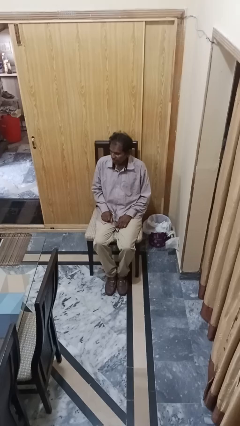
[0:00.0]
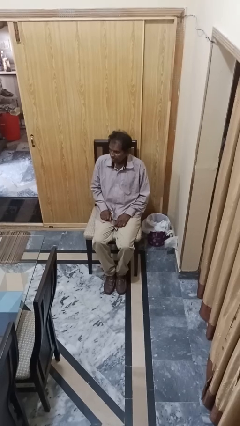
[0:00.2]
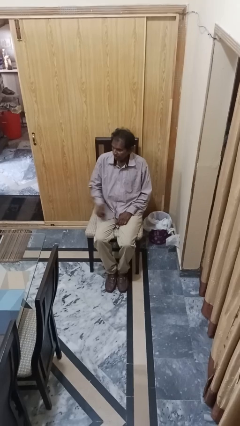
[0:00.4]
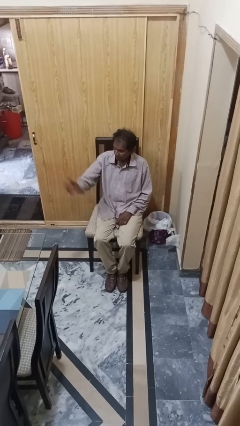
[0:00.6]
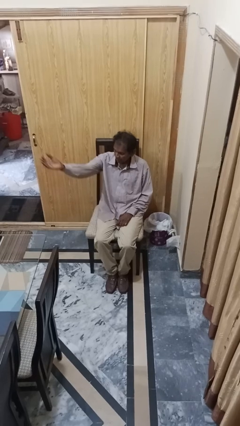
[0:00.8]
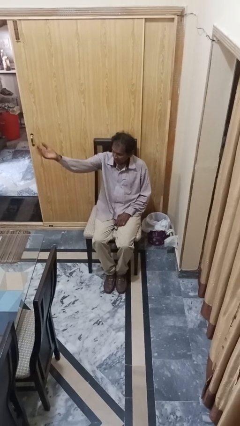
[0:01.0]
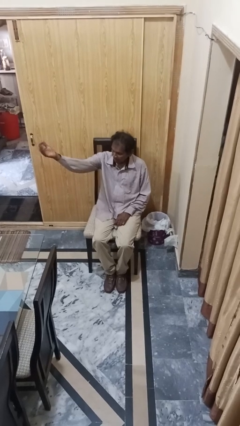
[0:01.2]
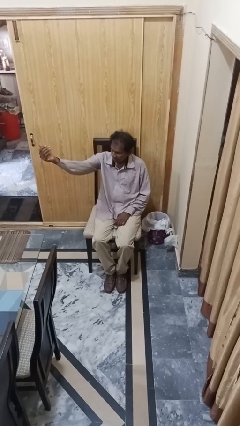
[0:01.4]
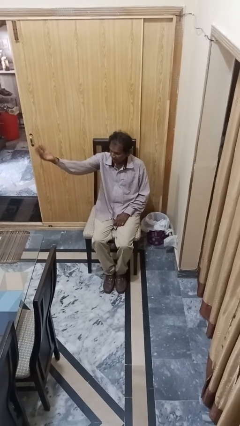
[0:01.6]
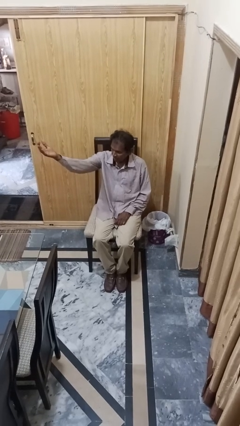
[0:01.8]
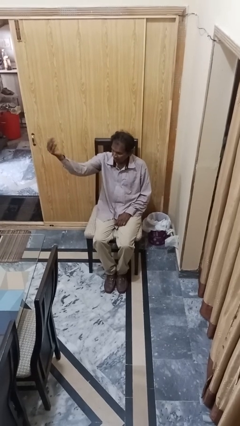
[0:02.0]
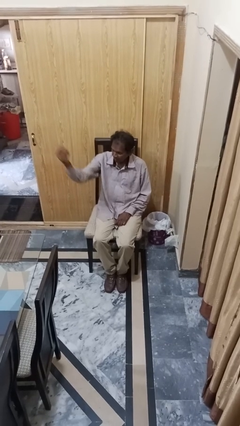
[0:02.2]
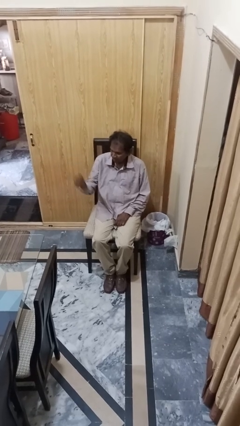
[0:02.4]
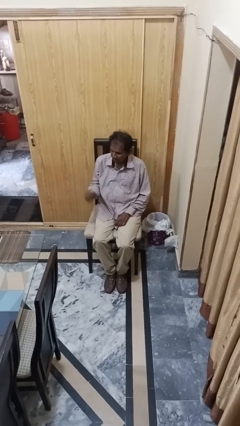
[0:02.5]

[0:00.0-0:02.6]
person gestures come here

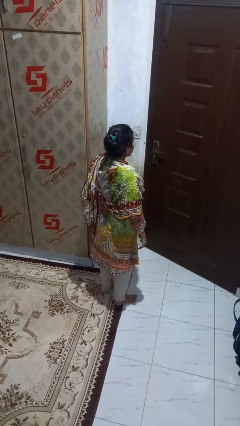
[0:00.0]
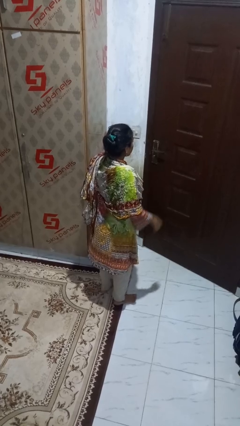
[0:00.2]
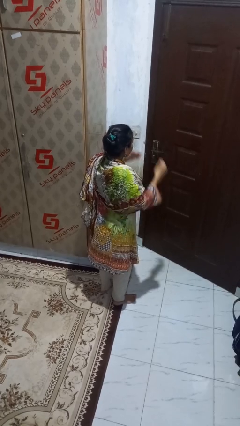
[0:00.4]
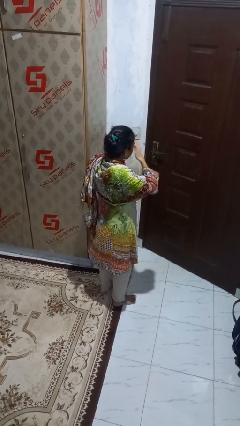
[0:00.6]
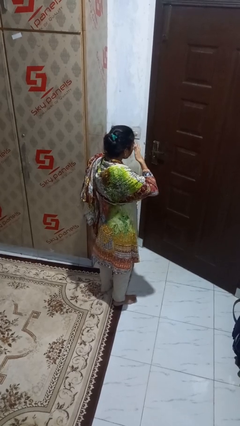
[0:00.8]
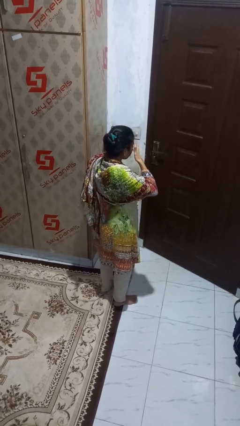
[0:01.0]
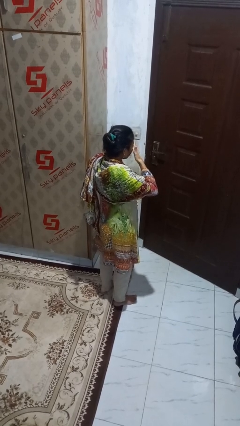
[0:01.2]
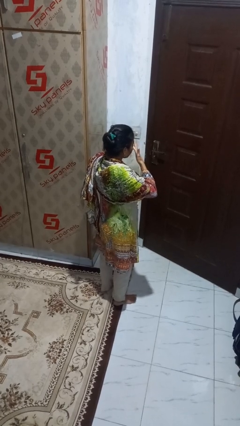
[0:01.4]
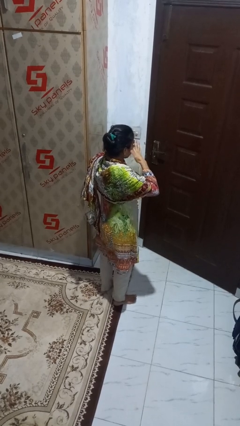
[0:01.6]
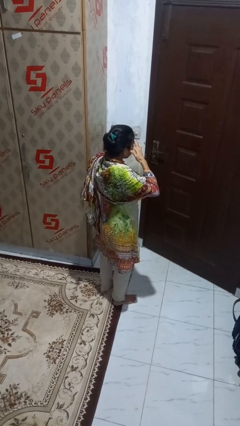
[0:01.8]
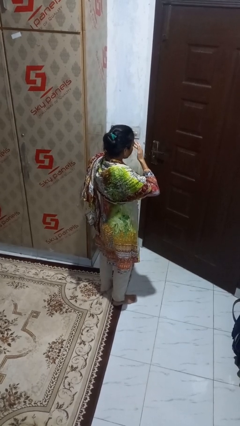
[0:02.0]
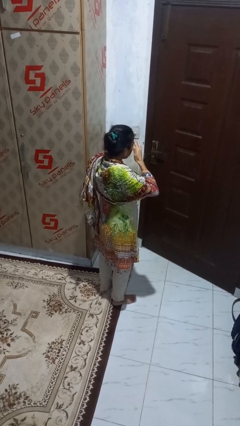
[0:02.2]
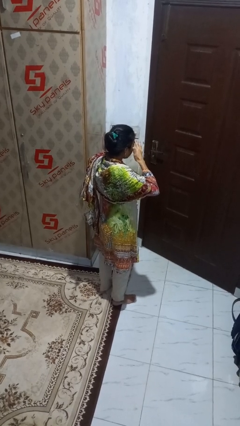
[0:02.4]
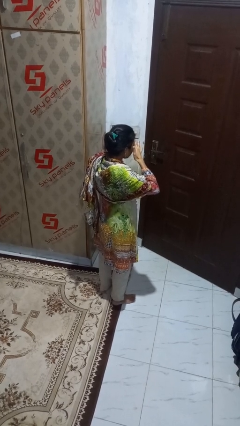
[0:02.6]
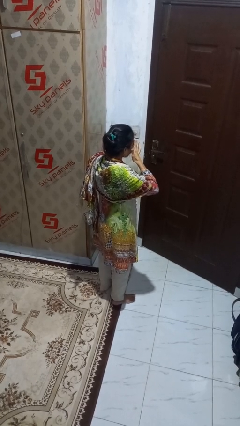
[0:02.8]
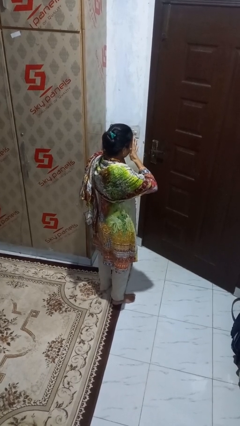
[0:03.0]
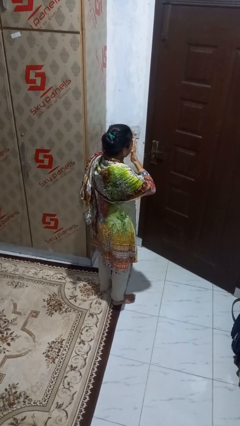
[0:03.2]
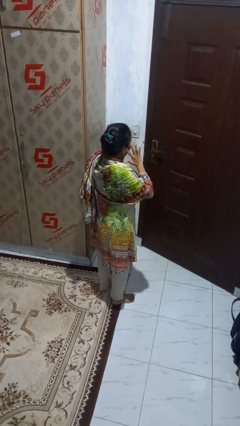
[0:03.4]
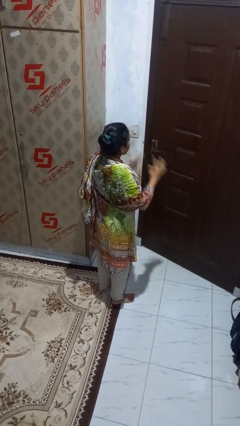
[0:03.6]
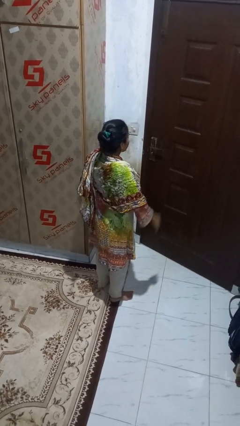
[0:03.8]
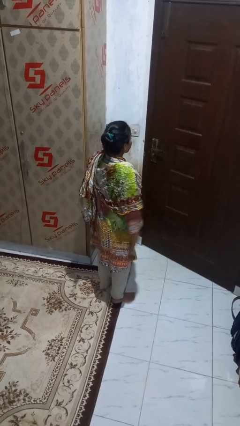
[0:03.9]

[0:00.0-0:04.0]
person rubs eyes

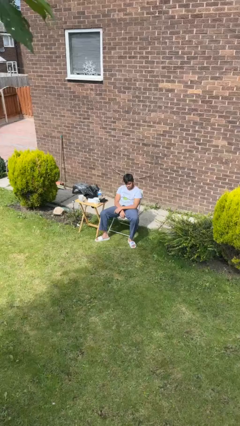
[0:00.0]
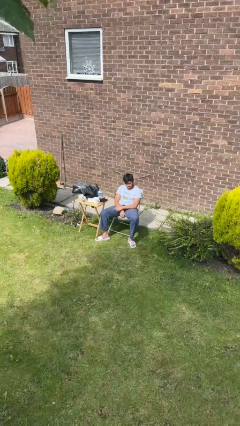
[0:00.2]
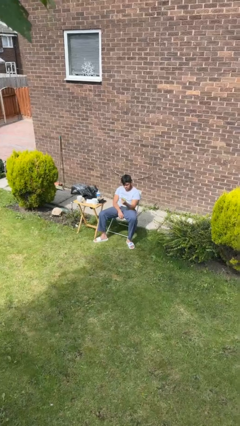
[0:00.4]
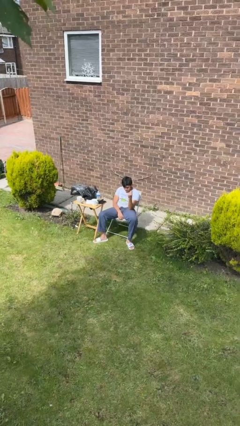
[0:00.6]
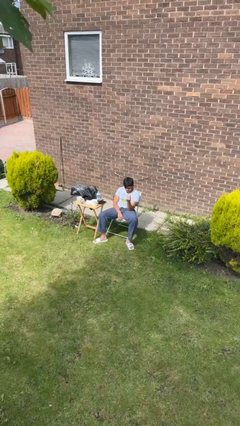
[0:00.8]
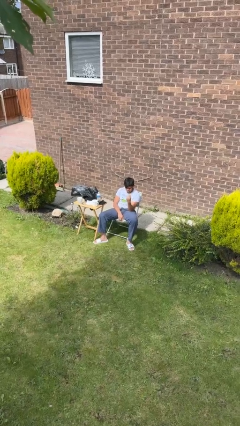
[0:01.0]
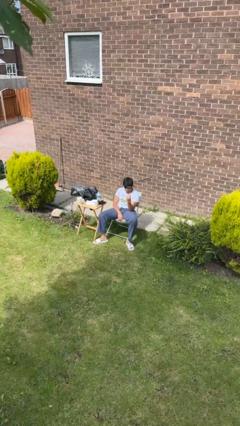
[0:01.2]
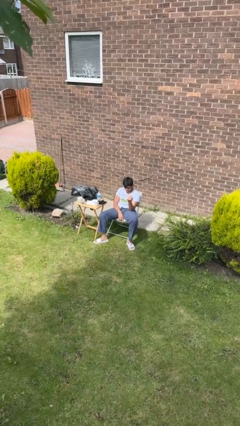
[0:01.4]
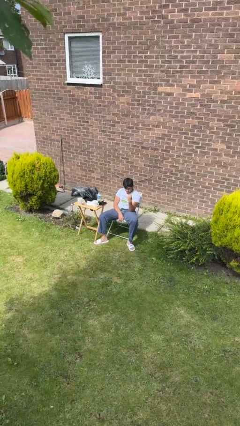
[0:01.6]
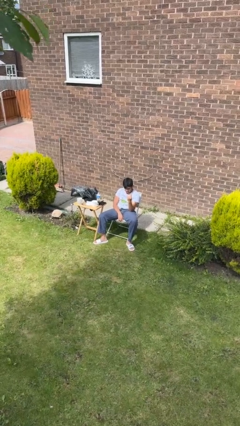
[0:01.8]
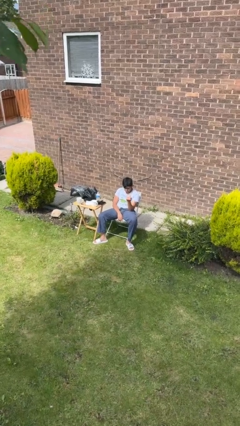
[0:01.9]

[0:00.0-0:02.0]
person snaps fingers

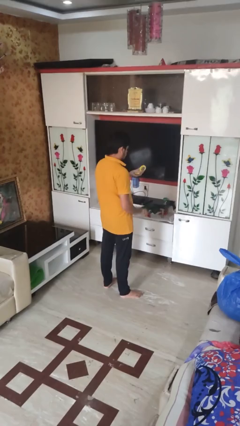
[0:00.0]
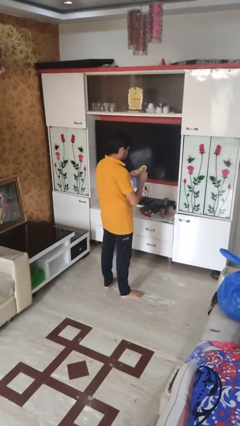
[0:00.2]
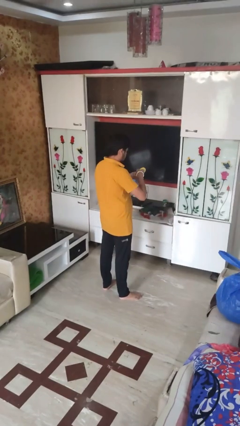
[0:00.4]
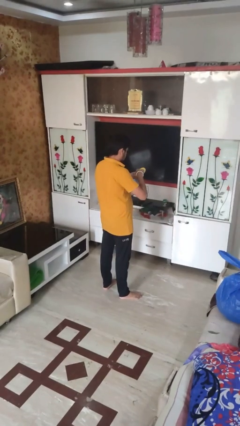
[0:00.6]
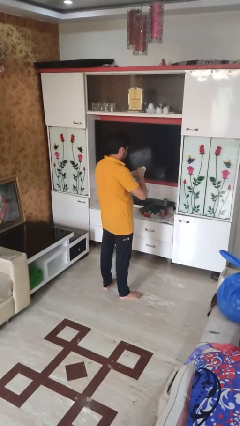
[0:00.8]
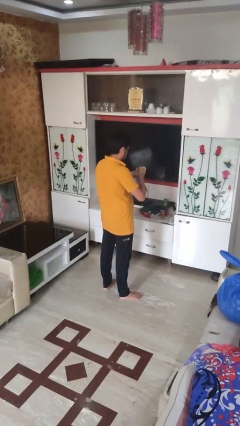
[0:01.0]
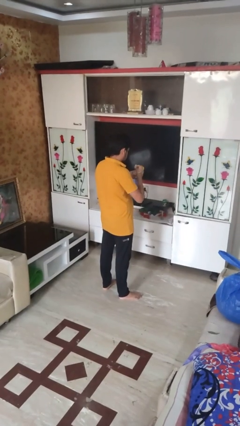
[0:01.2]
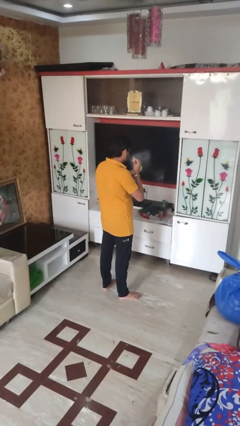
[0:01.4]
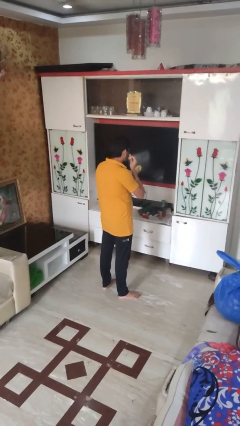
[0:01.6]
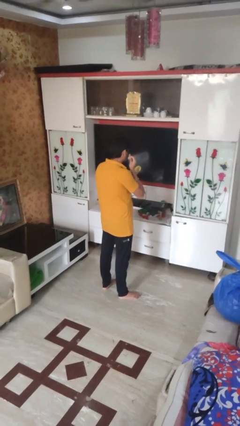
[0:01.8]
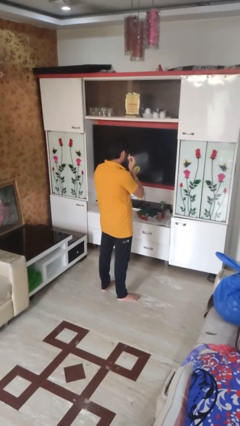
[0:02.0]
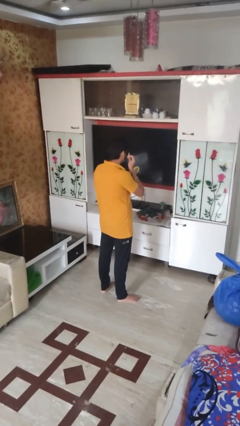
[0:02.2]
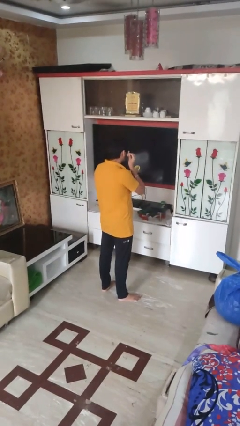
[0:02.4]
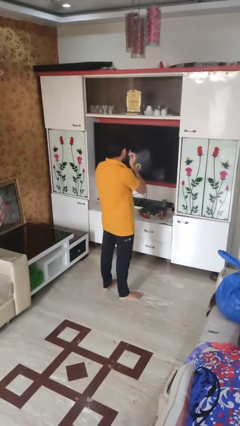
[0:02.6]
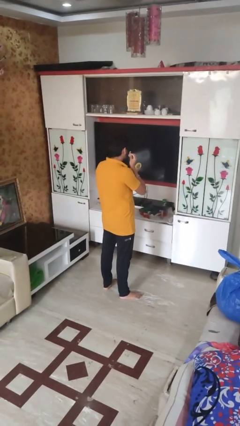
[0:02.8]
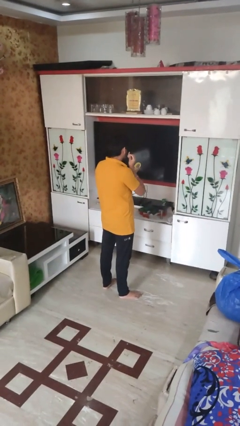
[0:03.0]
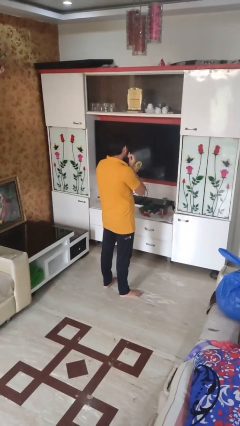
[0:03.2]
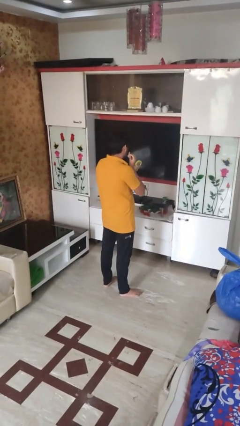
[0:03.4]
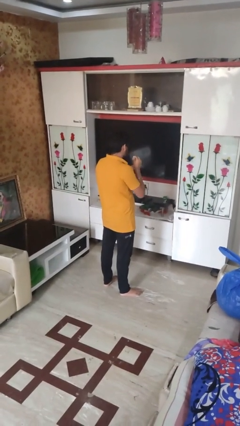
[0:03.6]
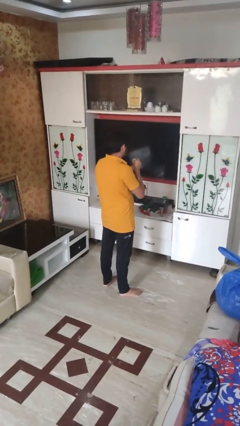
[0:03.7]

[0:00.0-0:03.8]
person applies foundation makeup

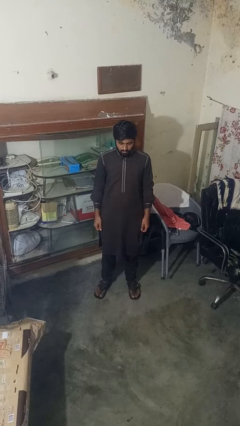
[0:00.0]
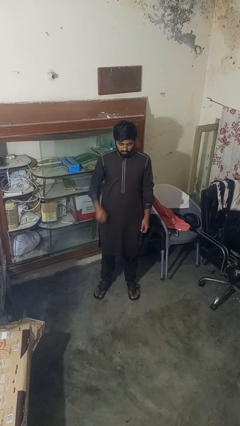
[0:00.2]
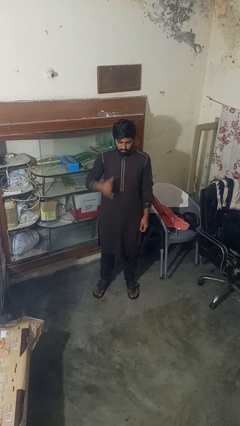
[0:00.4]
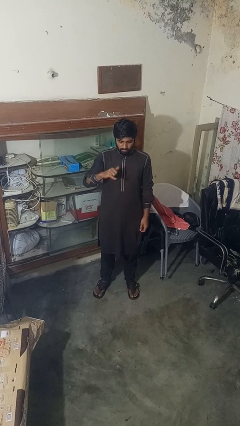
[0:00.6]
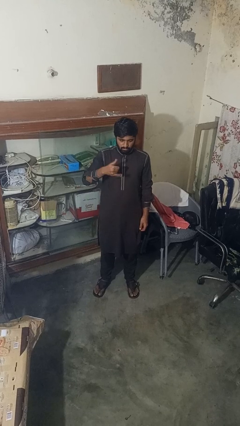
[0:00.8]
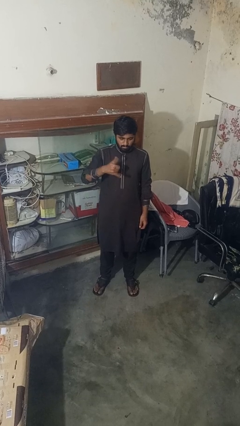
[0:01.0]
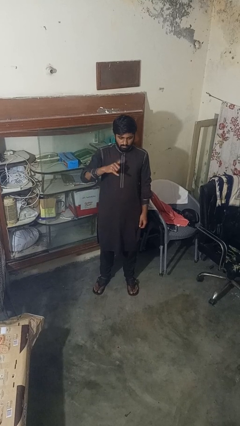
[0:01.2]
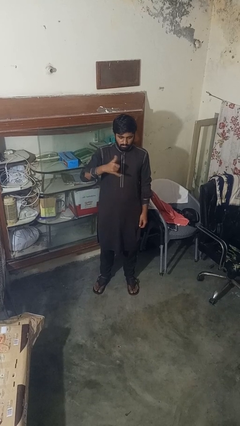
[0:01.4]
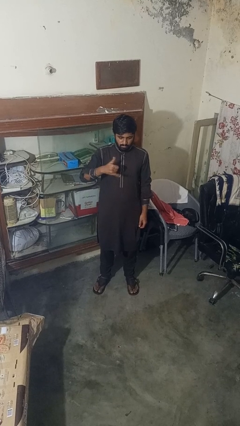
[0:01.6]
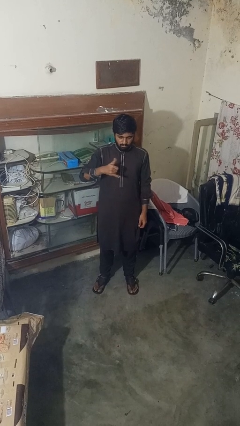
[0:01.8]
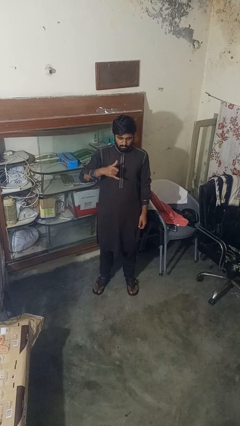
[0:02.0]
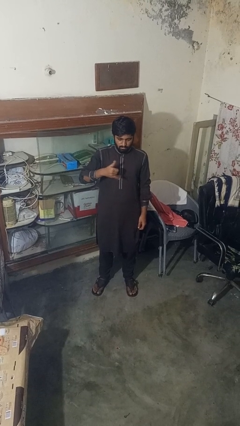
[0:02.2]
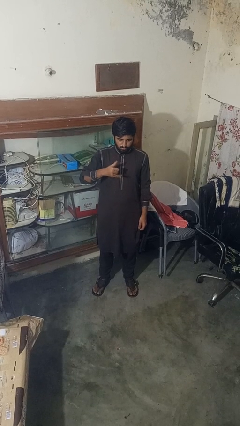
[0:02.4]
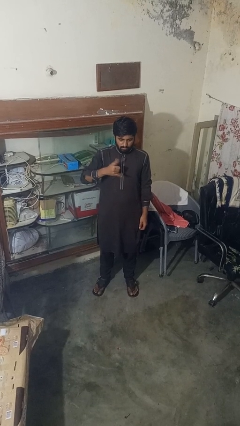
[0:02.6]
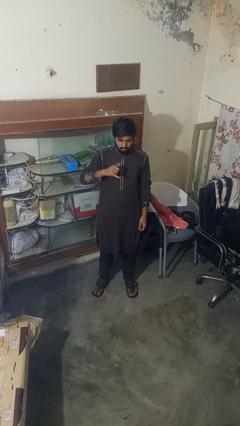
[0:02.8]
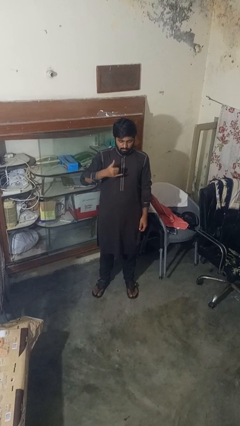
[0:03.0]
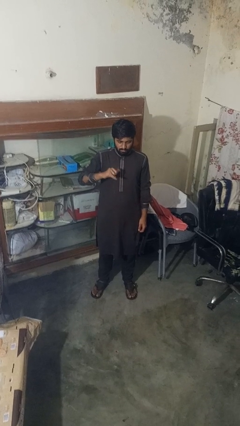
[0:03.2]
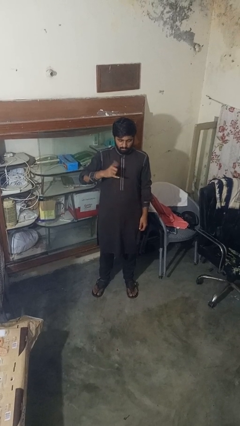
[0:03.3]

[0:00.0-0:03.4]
person gestures hang loose

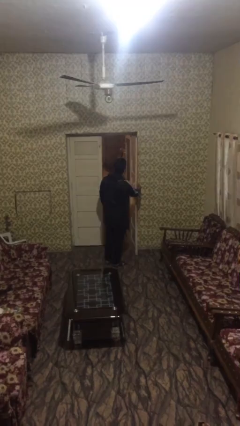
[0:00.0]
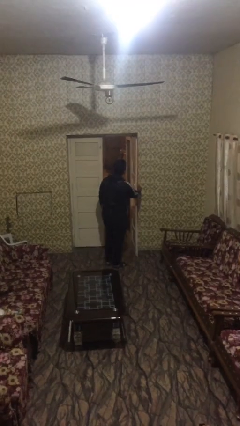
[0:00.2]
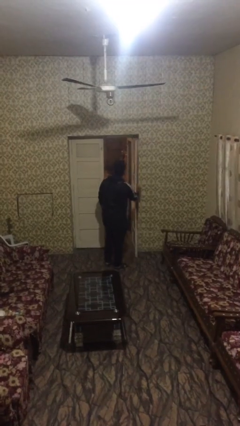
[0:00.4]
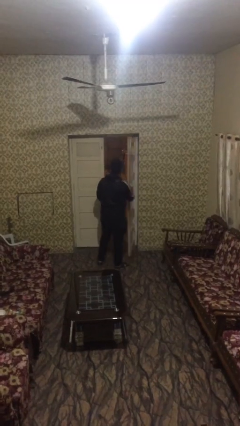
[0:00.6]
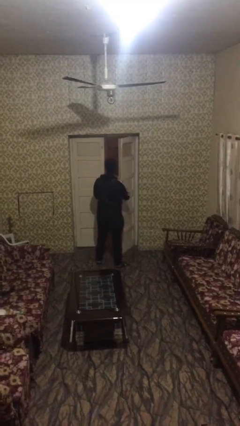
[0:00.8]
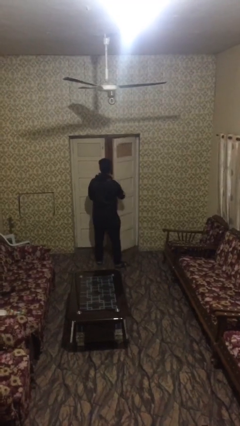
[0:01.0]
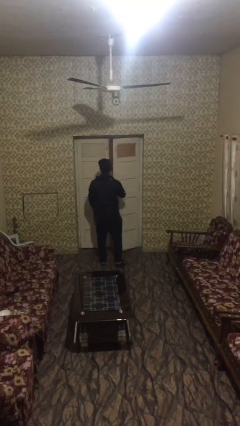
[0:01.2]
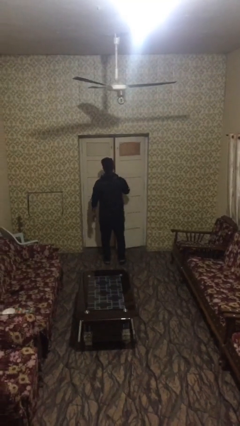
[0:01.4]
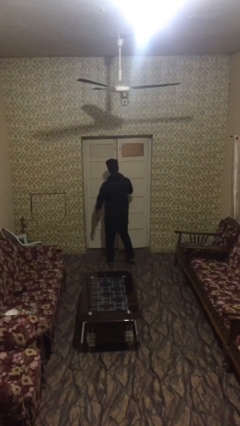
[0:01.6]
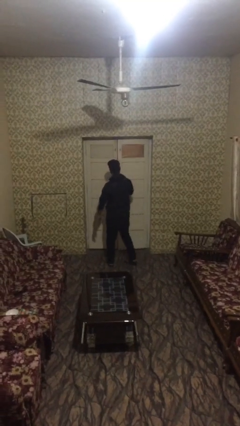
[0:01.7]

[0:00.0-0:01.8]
person closes facility door
